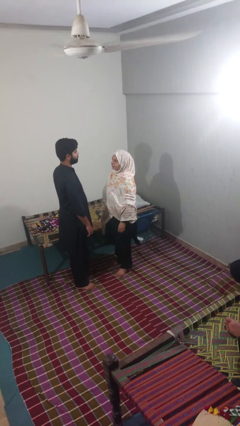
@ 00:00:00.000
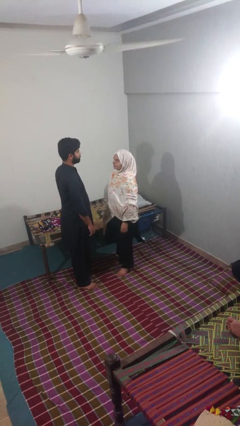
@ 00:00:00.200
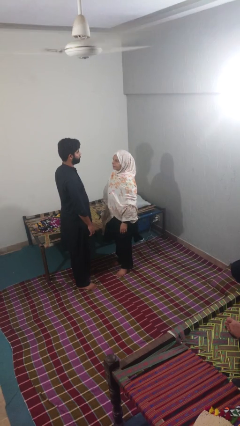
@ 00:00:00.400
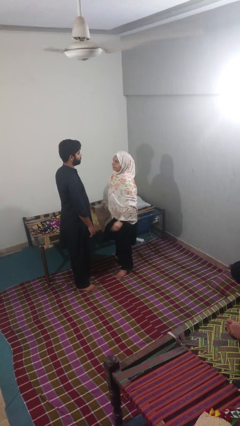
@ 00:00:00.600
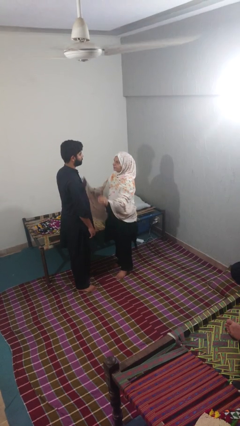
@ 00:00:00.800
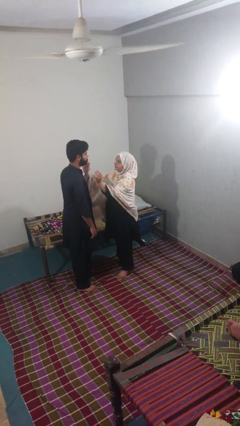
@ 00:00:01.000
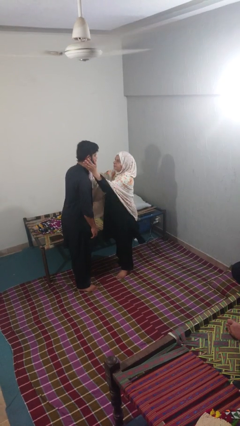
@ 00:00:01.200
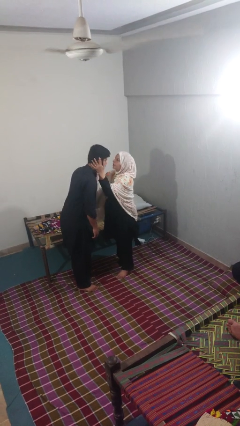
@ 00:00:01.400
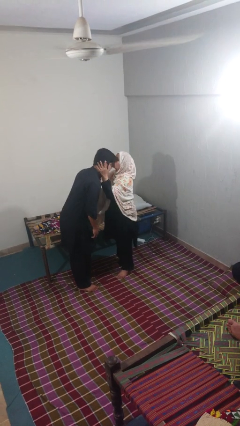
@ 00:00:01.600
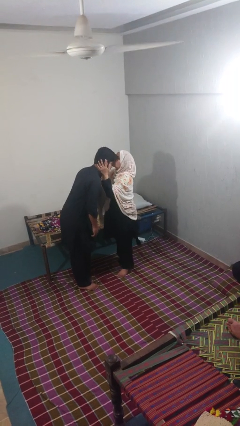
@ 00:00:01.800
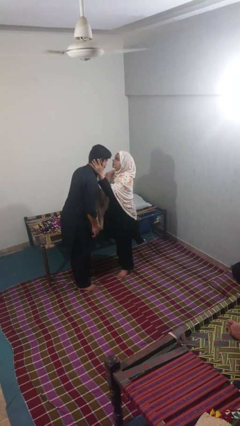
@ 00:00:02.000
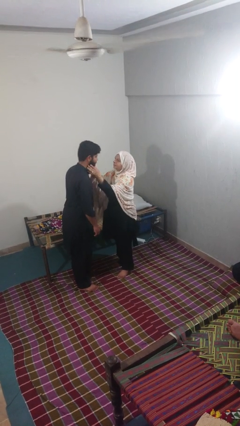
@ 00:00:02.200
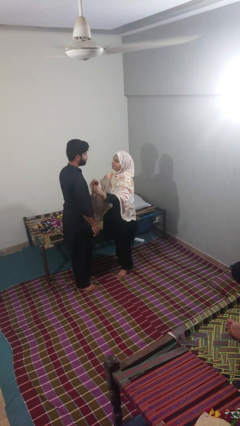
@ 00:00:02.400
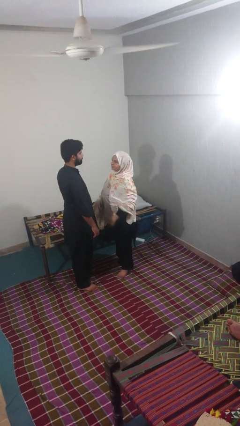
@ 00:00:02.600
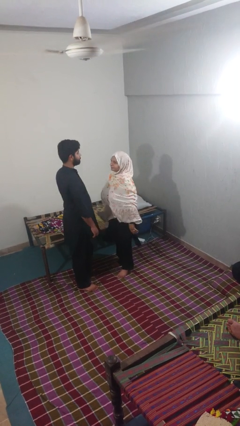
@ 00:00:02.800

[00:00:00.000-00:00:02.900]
person kisses cheek of person

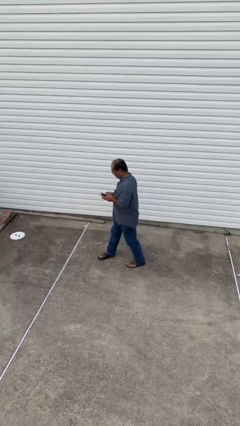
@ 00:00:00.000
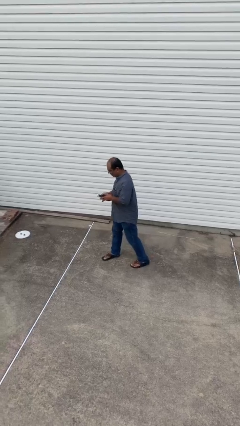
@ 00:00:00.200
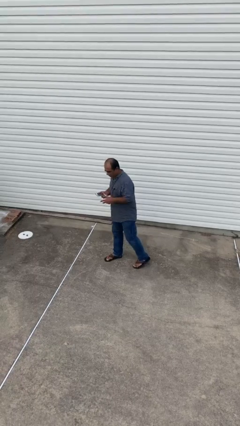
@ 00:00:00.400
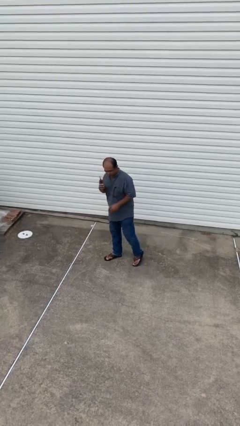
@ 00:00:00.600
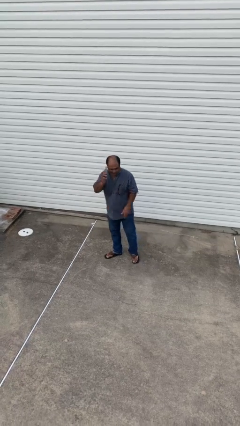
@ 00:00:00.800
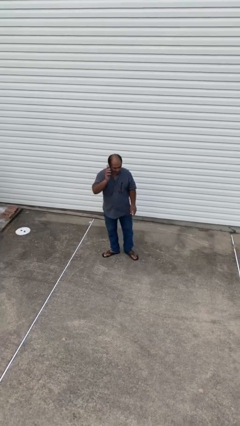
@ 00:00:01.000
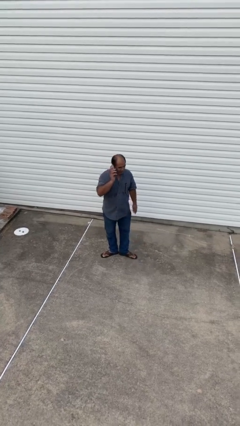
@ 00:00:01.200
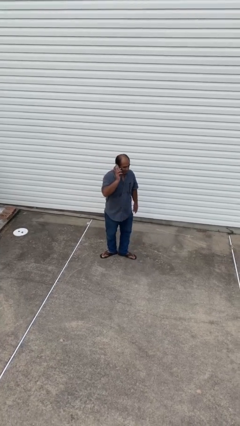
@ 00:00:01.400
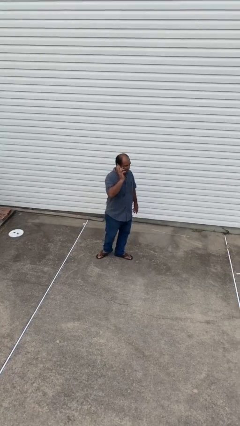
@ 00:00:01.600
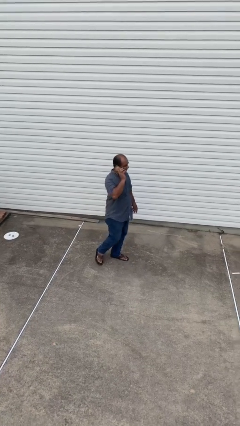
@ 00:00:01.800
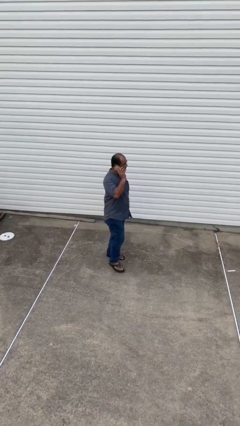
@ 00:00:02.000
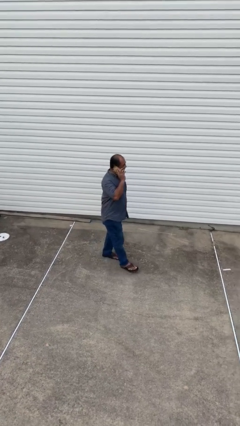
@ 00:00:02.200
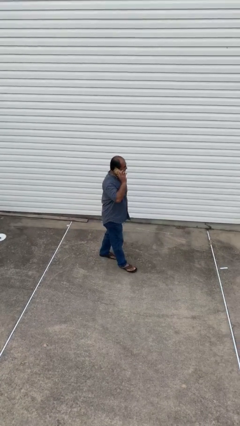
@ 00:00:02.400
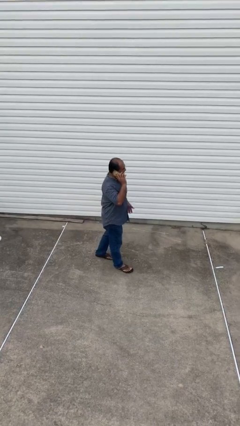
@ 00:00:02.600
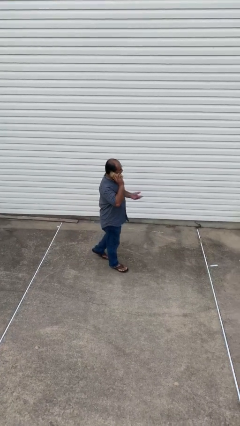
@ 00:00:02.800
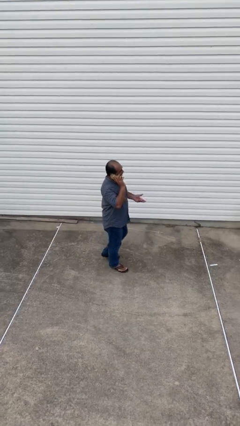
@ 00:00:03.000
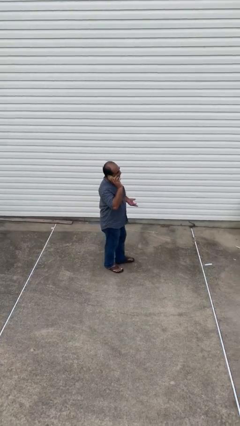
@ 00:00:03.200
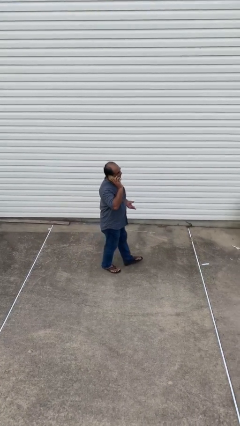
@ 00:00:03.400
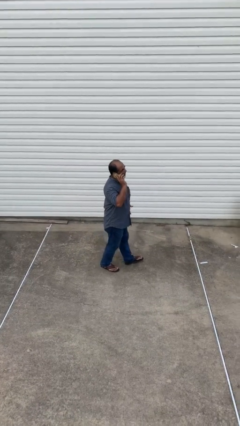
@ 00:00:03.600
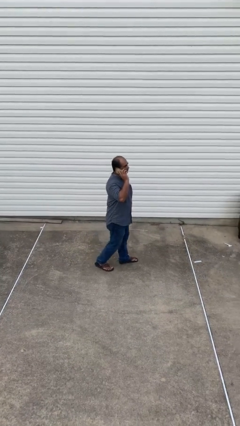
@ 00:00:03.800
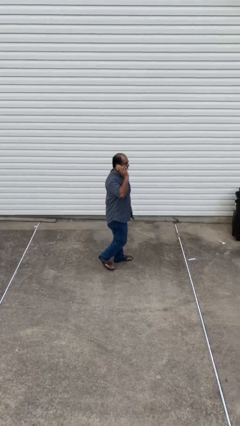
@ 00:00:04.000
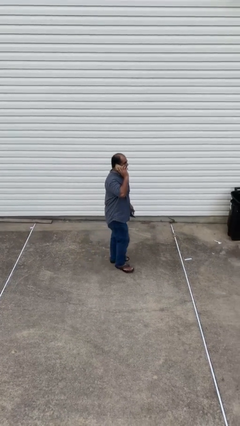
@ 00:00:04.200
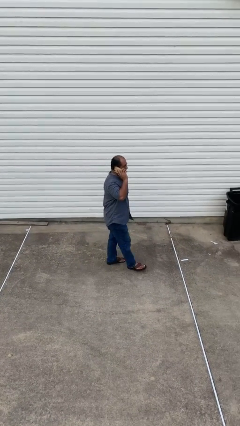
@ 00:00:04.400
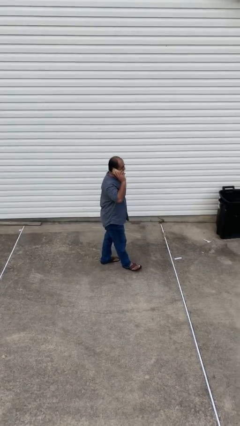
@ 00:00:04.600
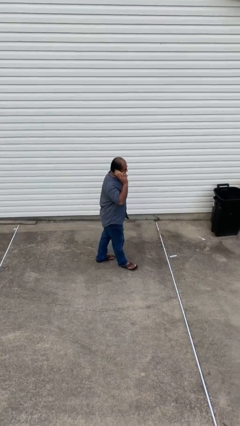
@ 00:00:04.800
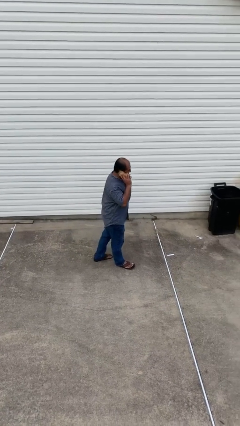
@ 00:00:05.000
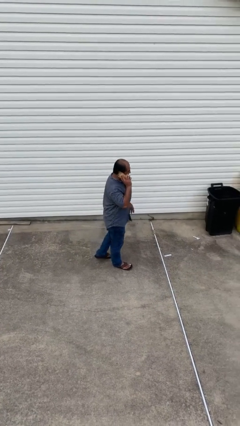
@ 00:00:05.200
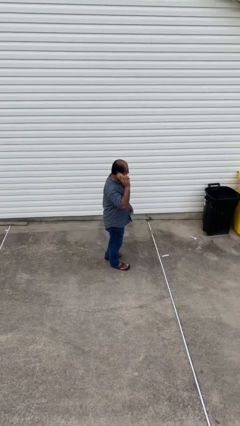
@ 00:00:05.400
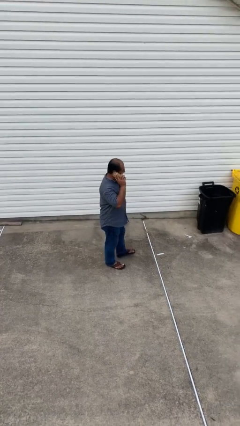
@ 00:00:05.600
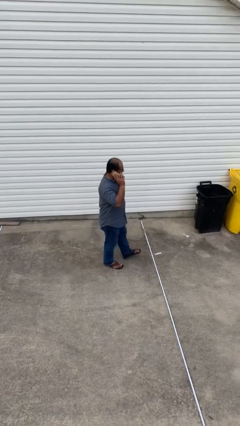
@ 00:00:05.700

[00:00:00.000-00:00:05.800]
person talks on phone

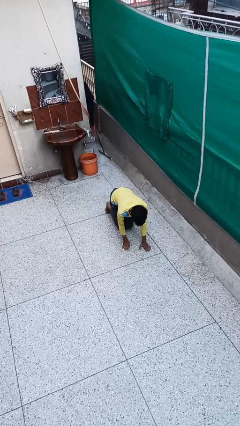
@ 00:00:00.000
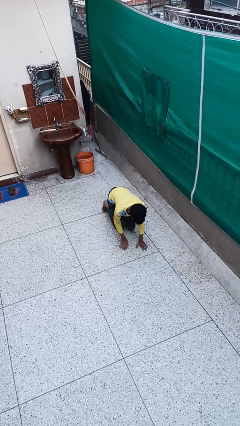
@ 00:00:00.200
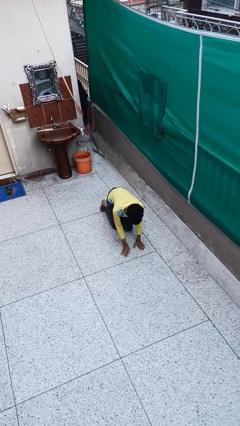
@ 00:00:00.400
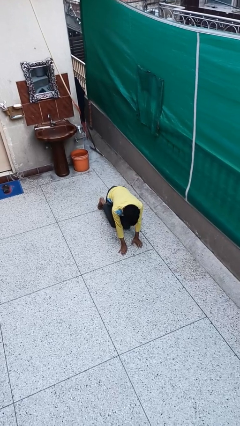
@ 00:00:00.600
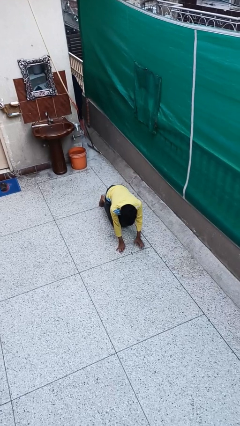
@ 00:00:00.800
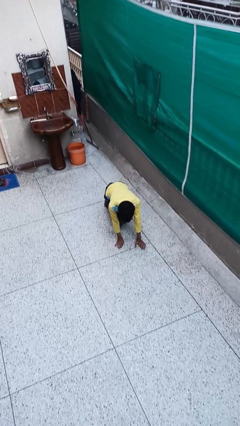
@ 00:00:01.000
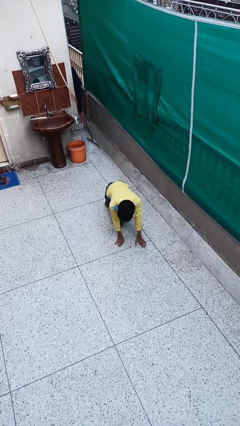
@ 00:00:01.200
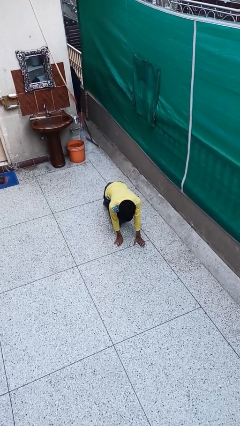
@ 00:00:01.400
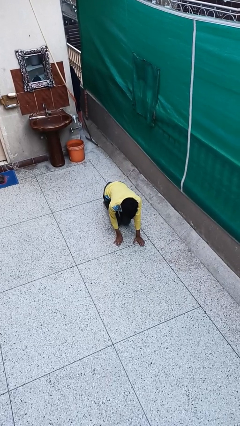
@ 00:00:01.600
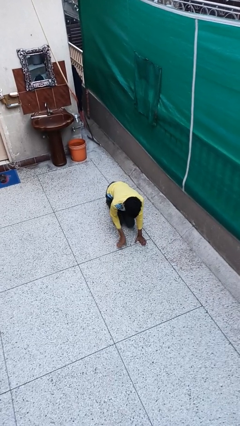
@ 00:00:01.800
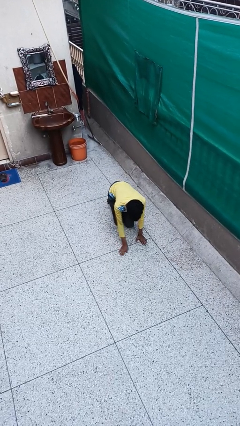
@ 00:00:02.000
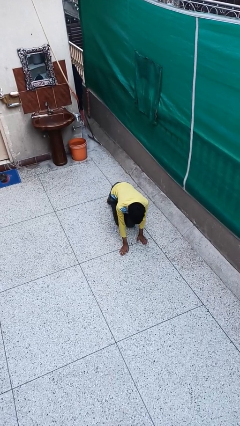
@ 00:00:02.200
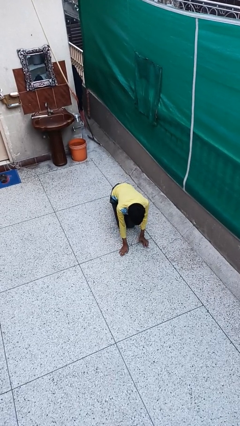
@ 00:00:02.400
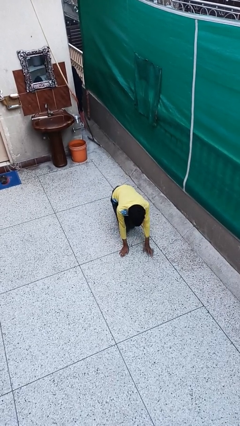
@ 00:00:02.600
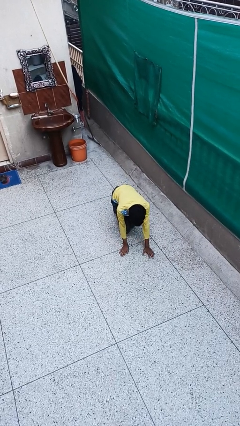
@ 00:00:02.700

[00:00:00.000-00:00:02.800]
person crawls

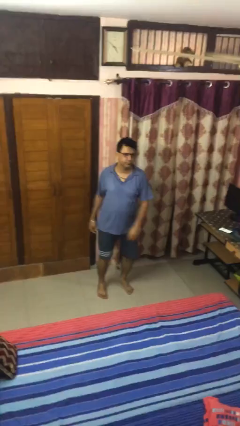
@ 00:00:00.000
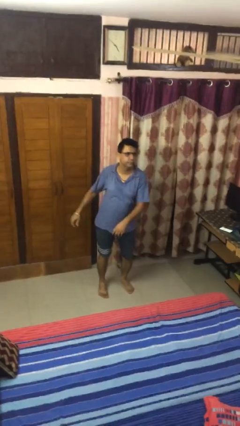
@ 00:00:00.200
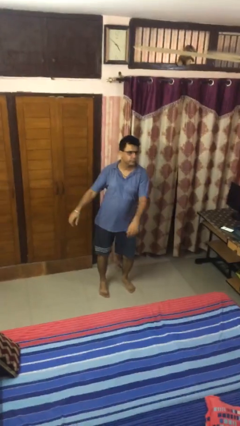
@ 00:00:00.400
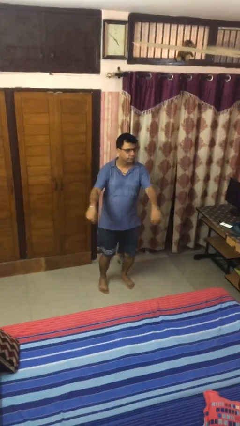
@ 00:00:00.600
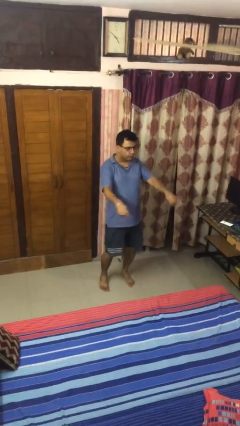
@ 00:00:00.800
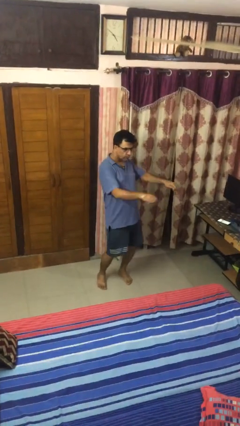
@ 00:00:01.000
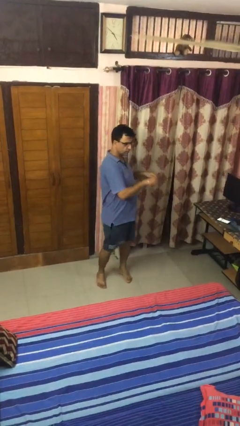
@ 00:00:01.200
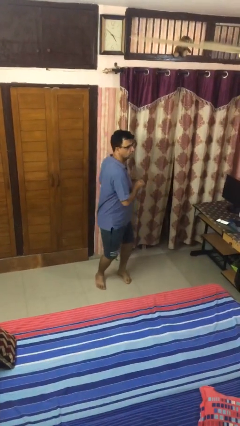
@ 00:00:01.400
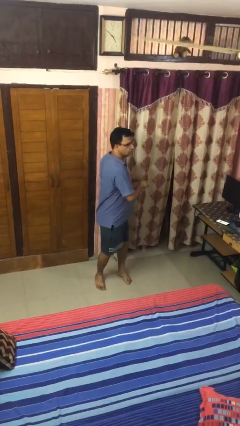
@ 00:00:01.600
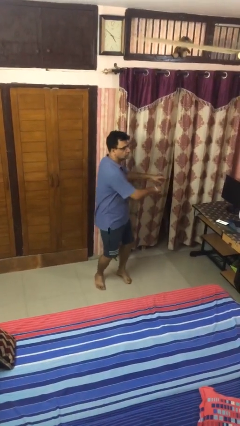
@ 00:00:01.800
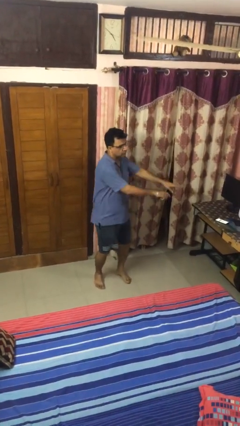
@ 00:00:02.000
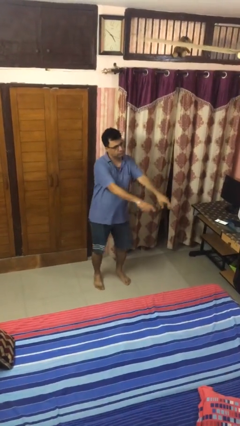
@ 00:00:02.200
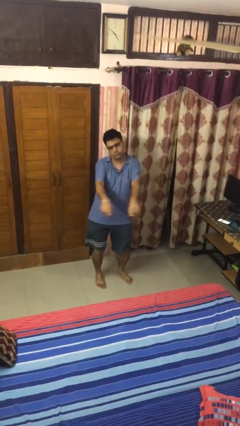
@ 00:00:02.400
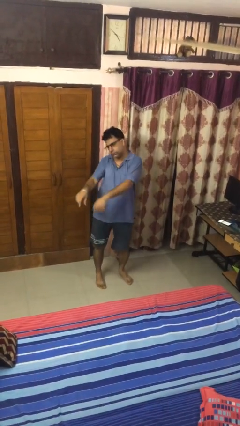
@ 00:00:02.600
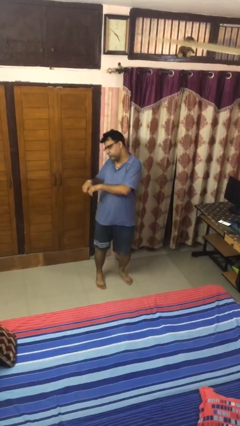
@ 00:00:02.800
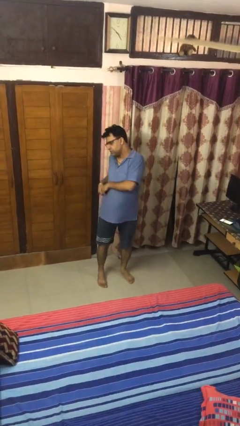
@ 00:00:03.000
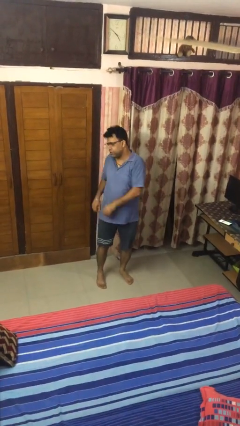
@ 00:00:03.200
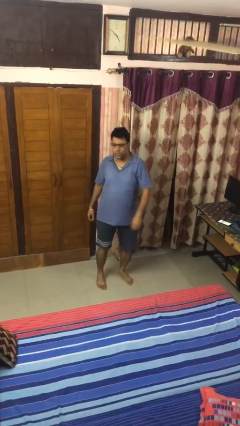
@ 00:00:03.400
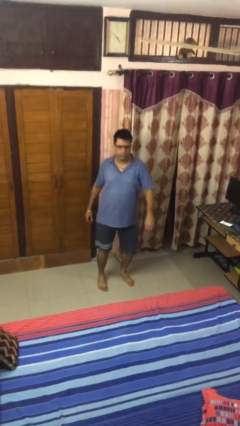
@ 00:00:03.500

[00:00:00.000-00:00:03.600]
person dances in place

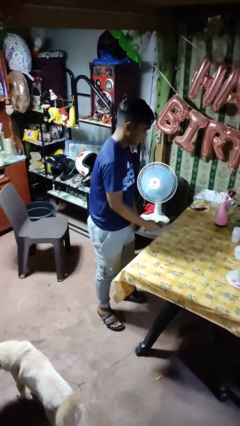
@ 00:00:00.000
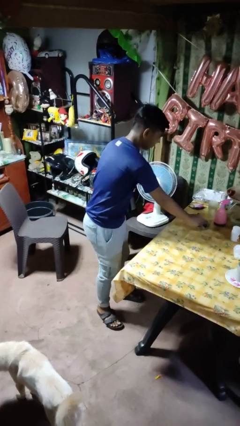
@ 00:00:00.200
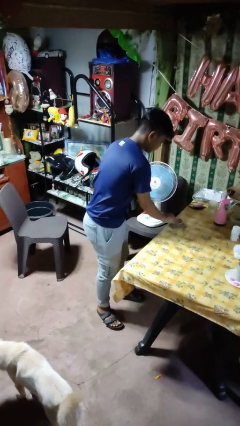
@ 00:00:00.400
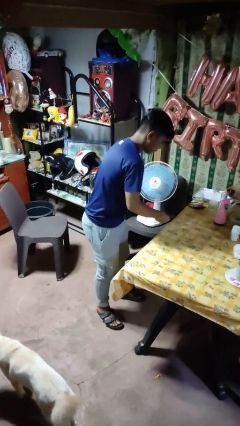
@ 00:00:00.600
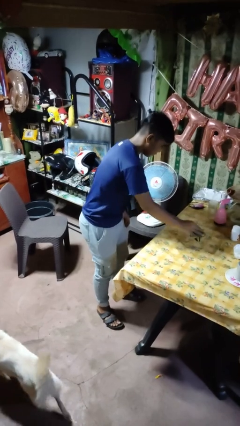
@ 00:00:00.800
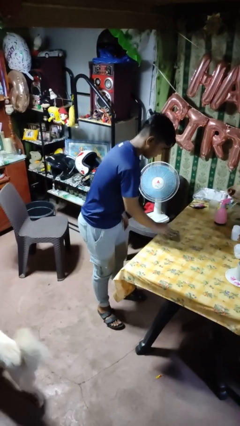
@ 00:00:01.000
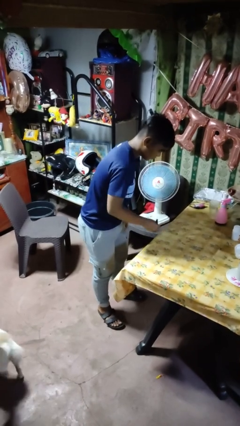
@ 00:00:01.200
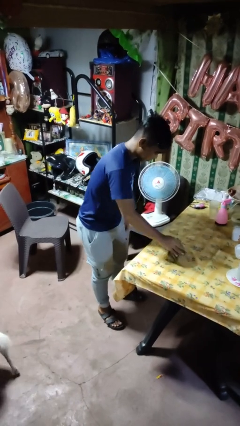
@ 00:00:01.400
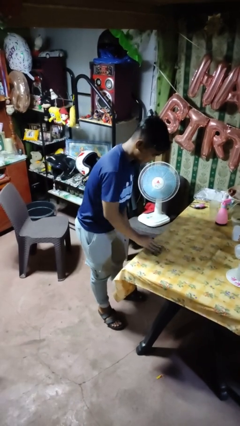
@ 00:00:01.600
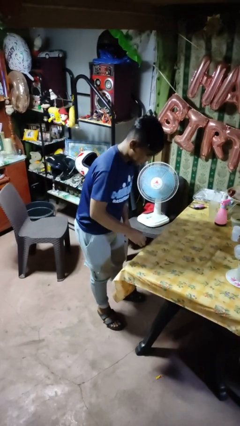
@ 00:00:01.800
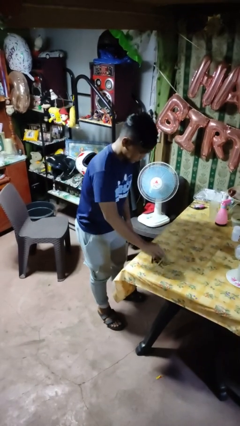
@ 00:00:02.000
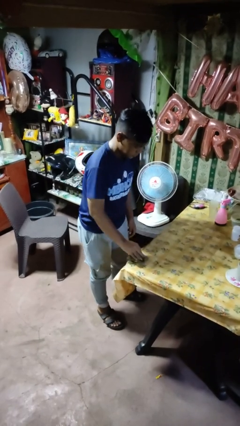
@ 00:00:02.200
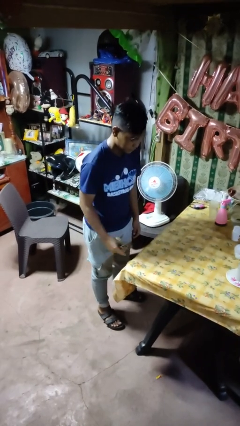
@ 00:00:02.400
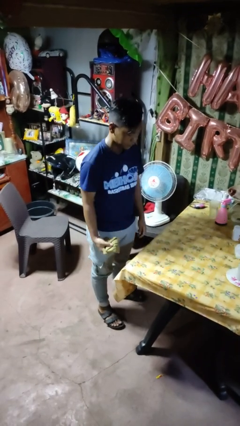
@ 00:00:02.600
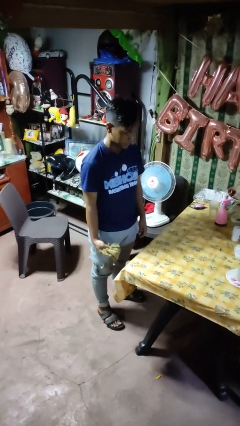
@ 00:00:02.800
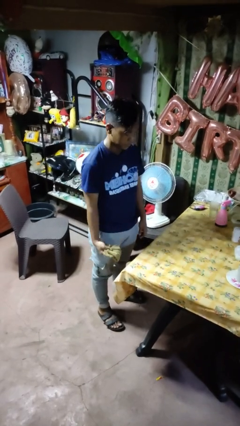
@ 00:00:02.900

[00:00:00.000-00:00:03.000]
person cleans table with rag
